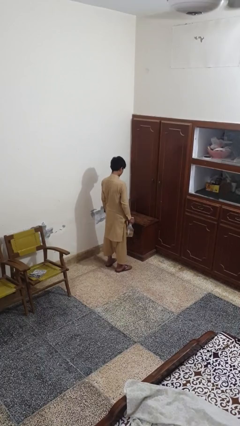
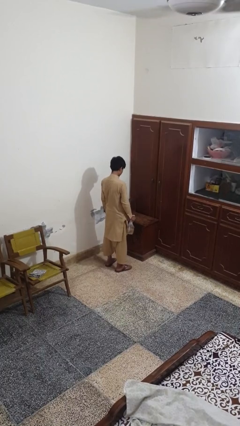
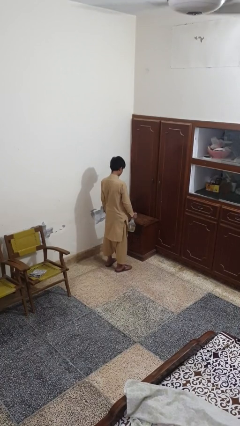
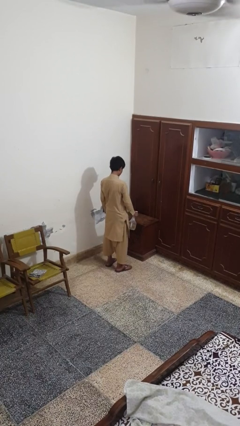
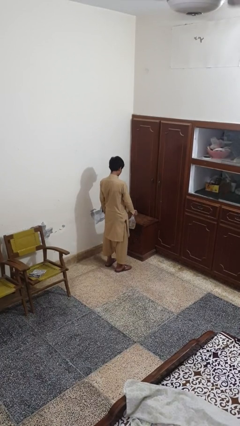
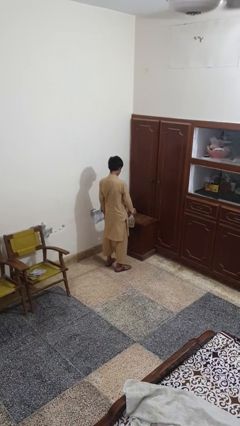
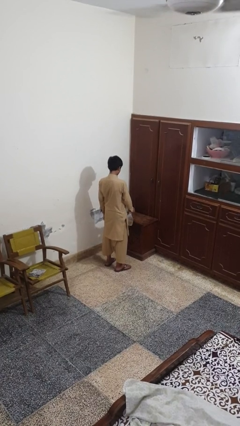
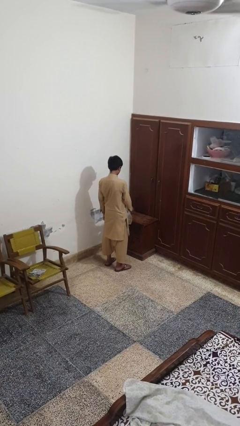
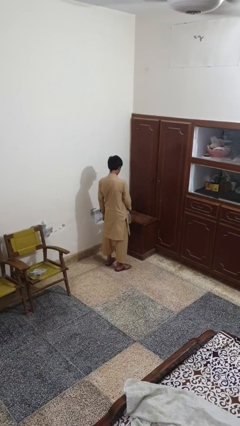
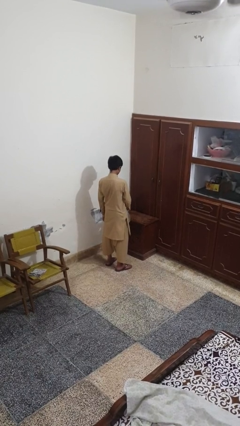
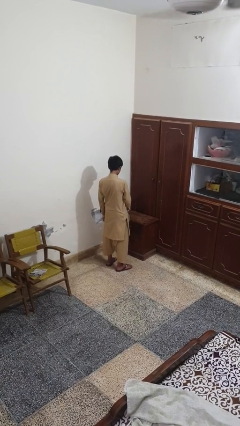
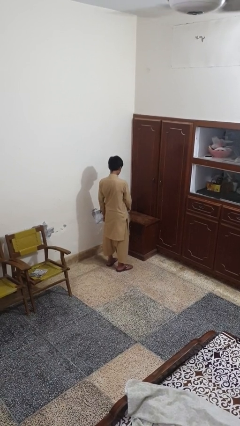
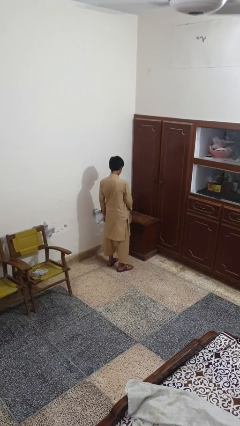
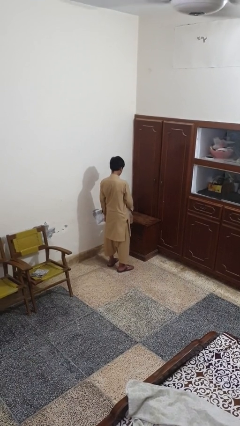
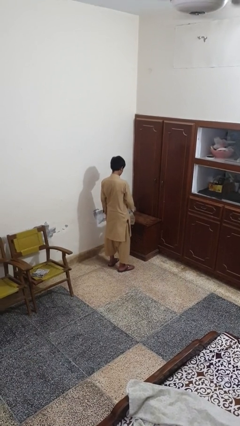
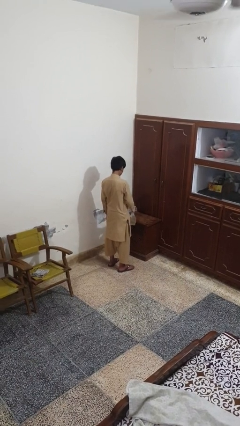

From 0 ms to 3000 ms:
person sprays from bottle

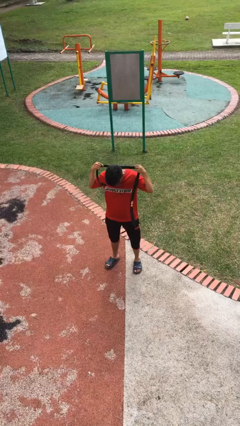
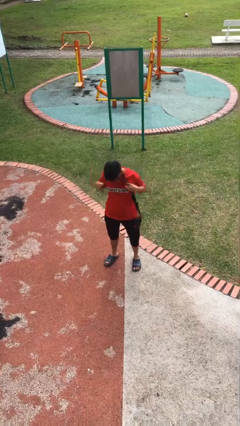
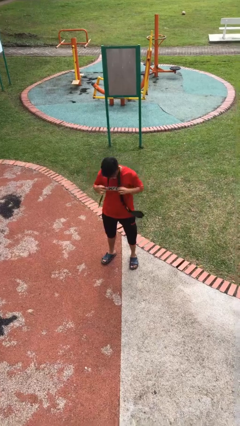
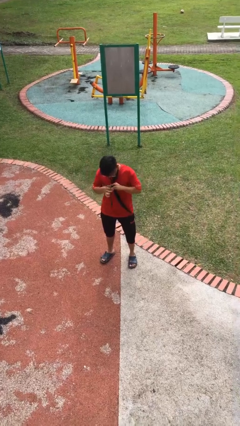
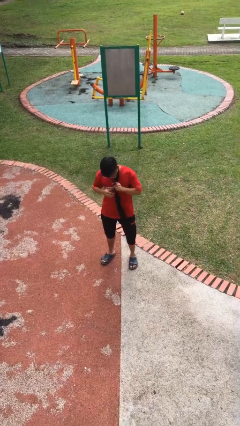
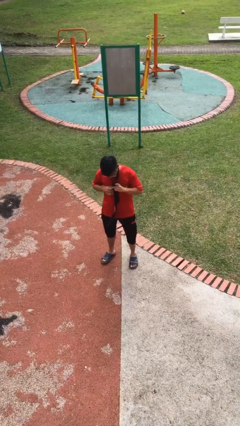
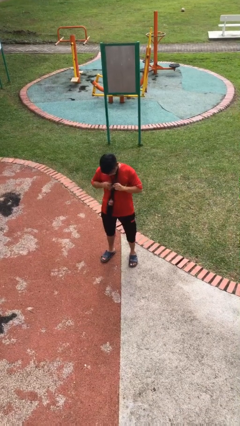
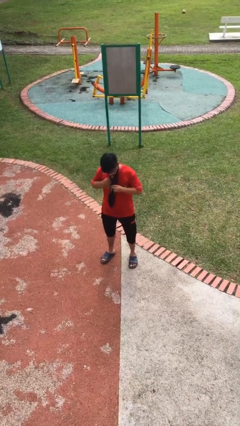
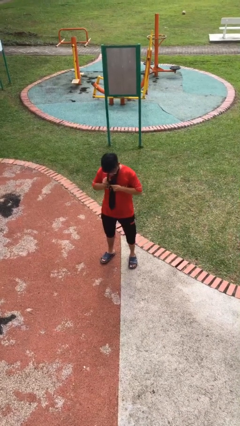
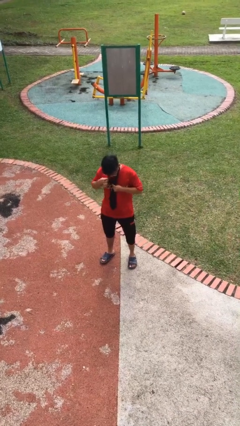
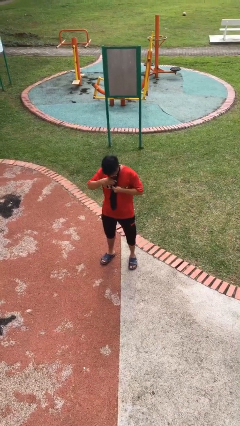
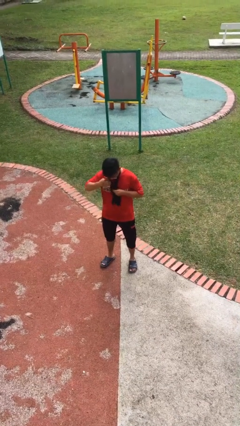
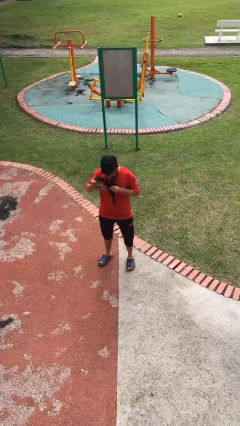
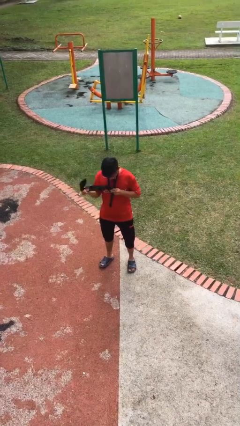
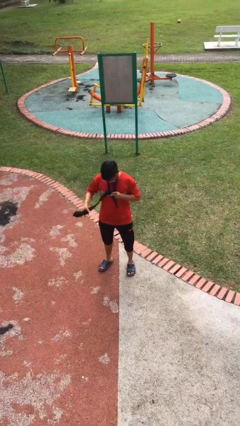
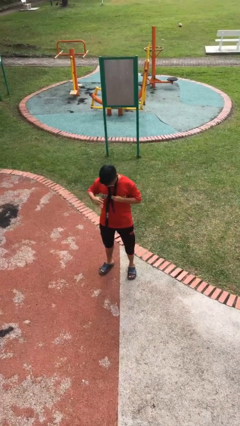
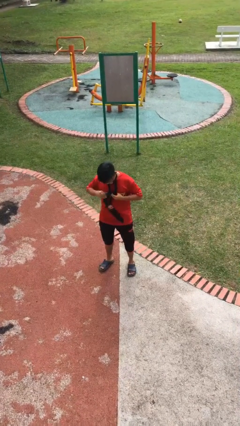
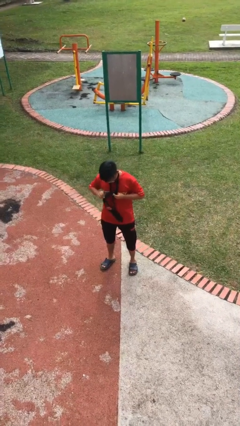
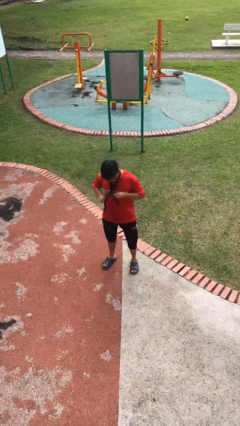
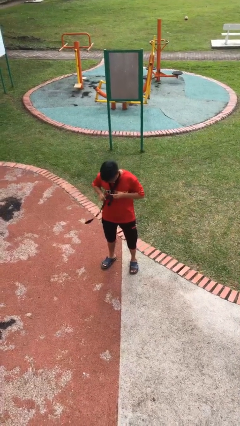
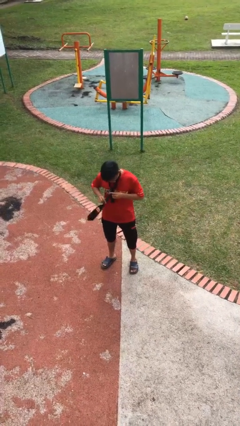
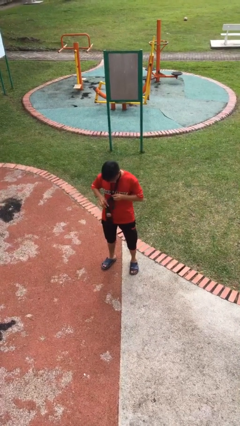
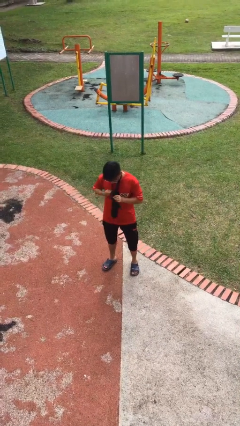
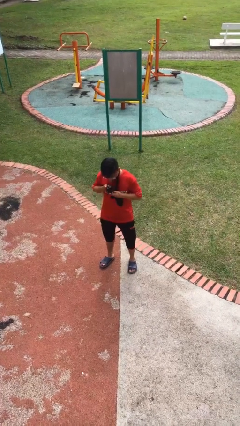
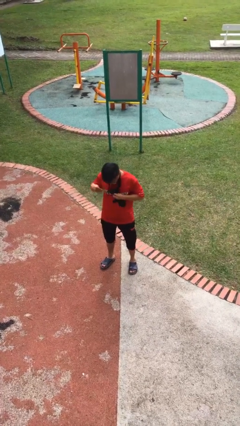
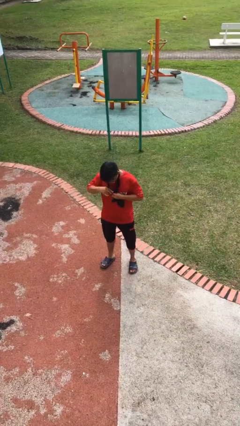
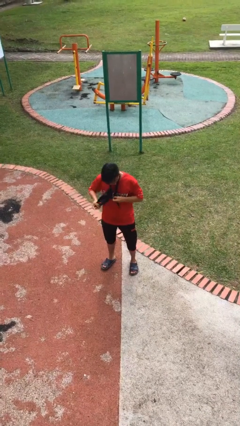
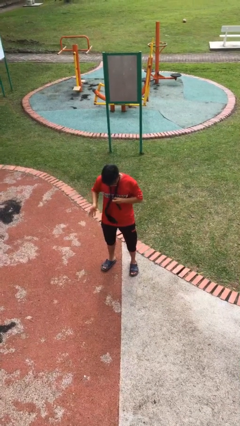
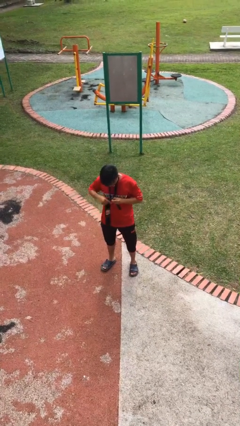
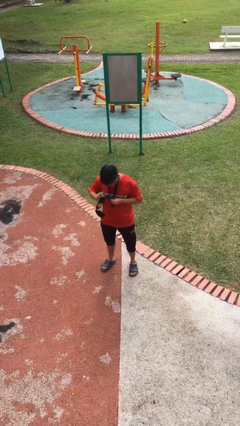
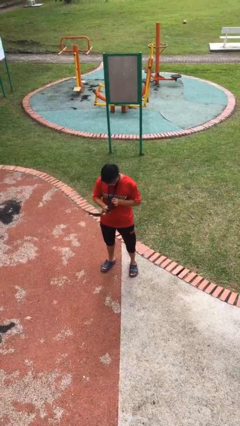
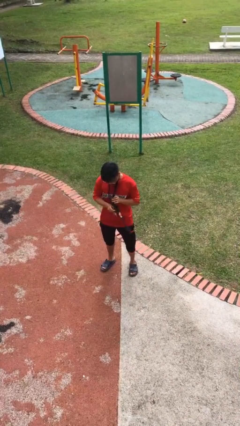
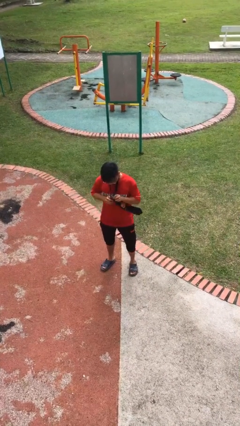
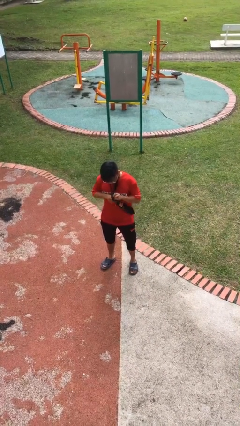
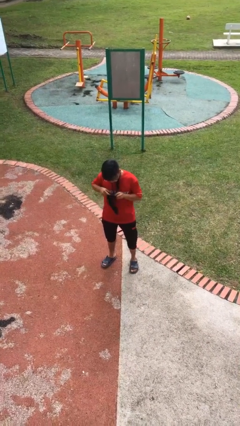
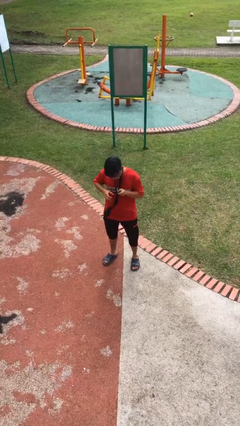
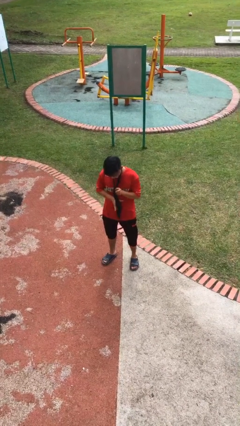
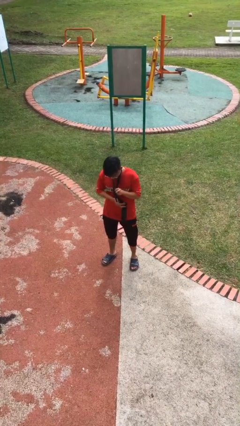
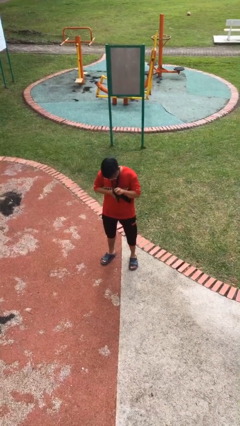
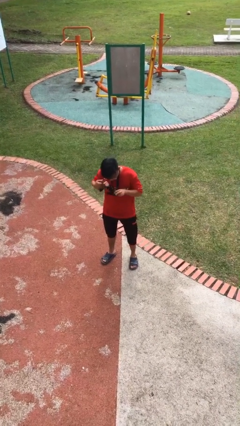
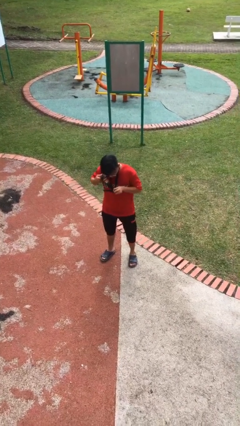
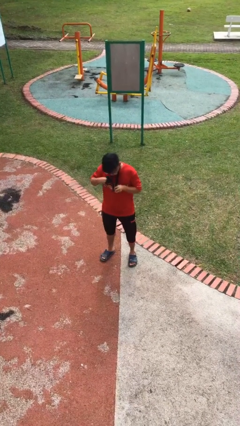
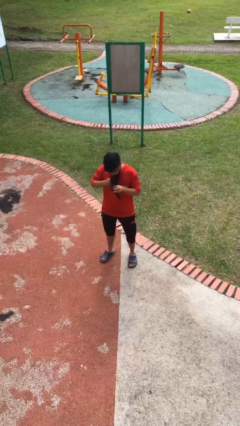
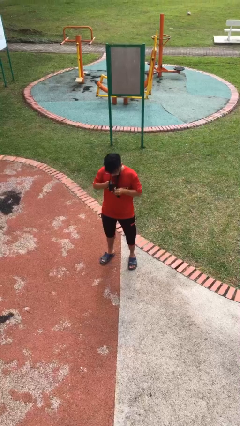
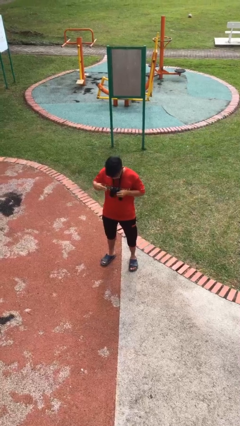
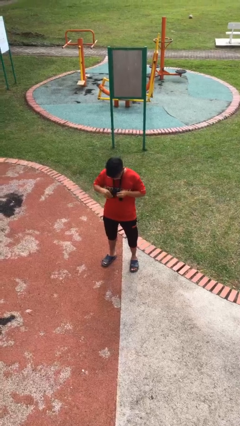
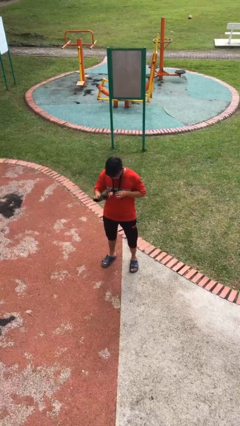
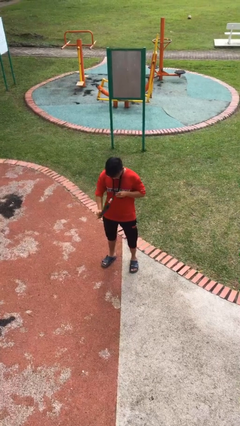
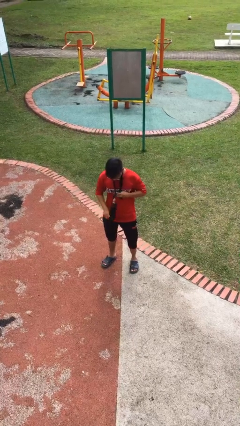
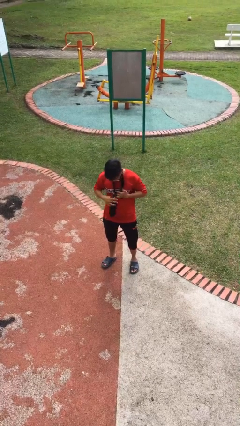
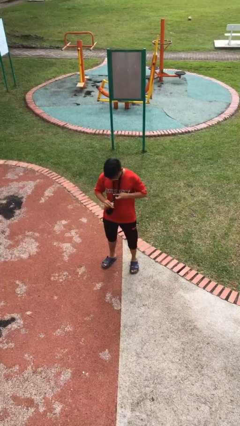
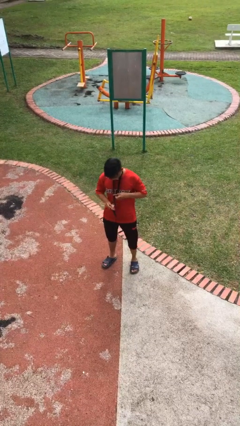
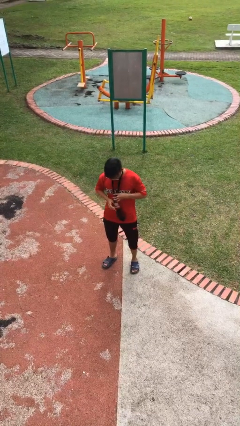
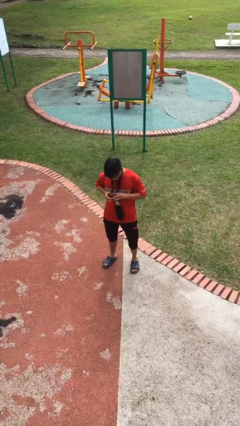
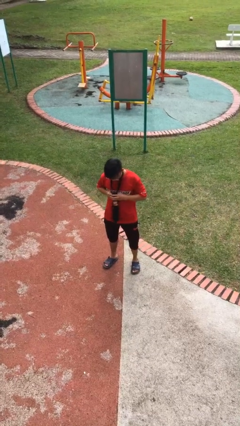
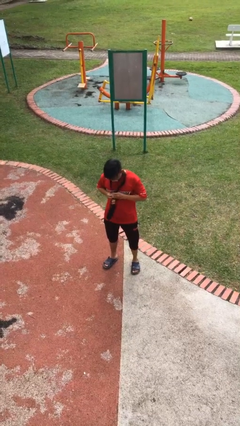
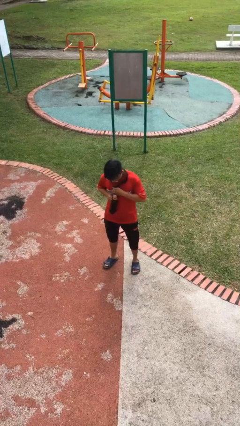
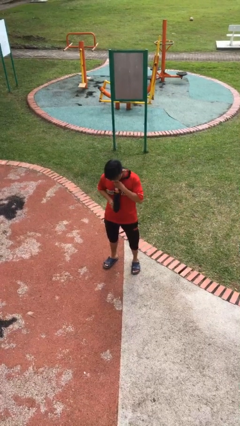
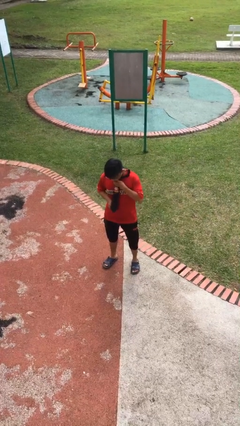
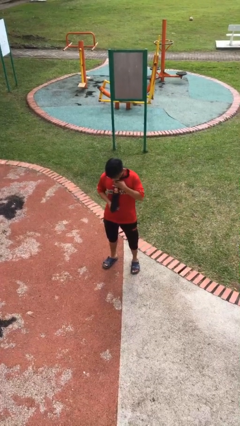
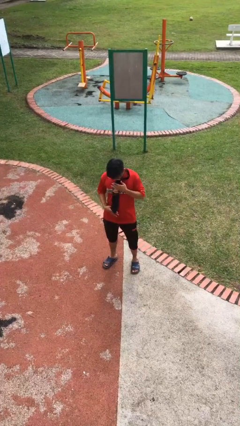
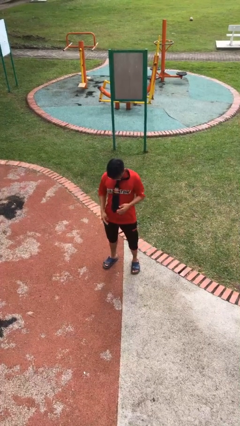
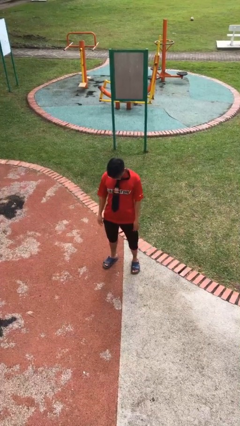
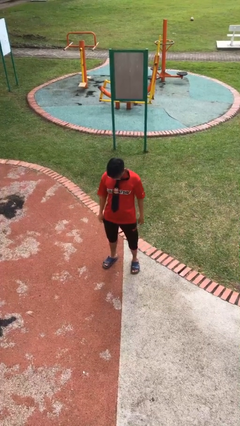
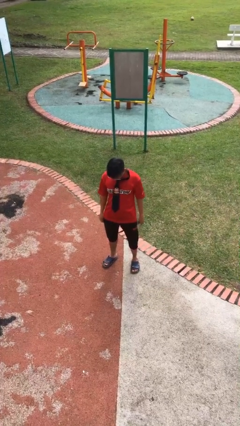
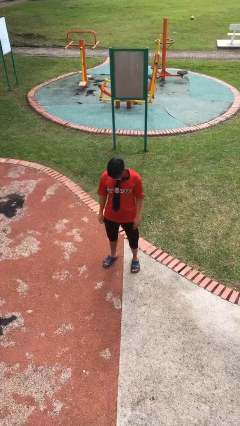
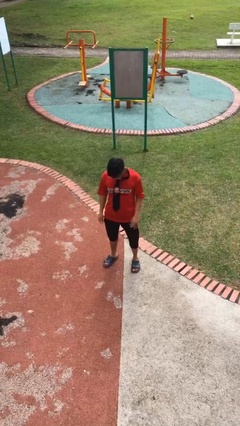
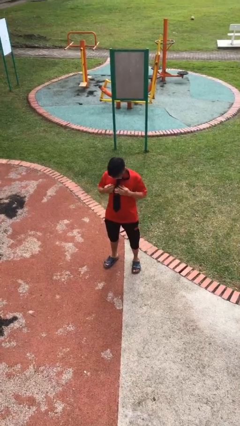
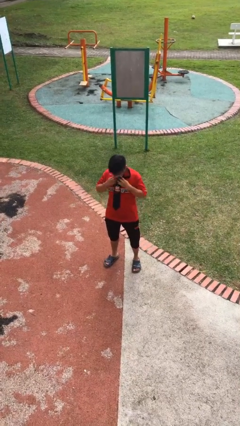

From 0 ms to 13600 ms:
person puts on necktie

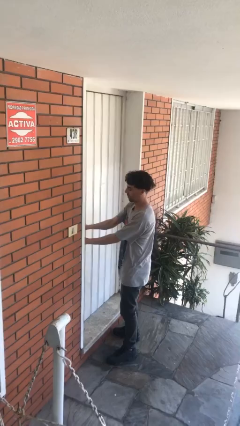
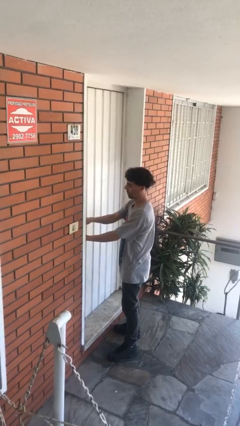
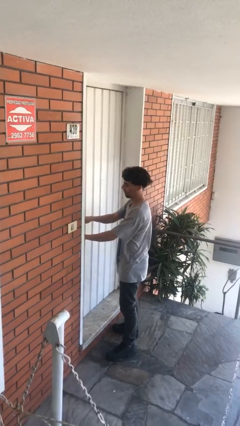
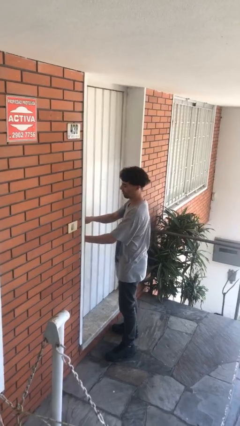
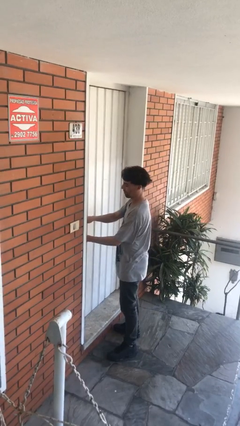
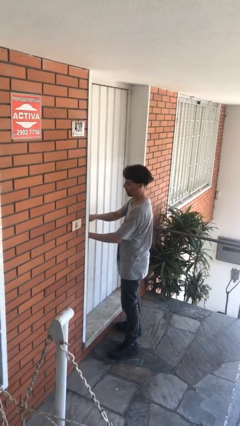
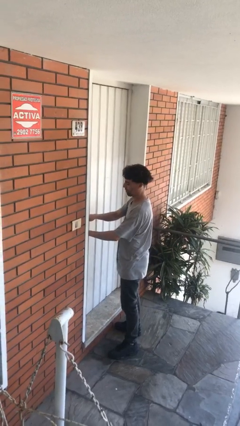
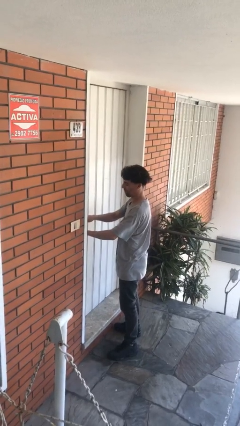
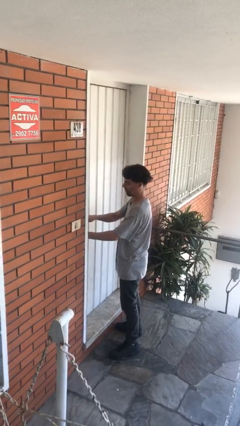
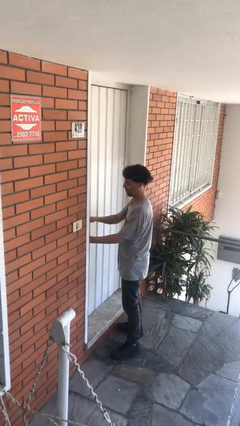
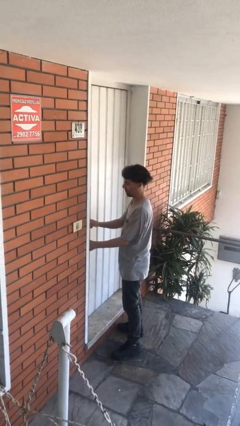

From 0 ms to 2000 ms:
person locks door with keys
